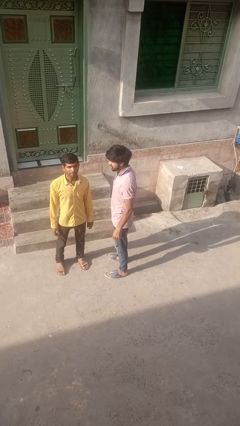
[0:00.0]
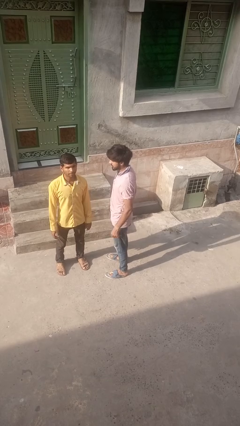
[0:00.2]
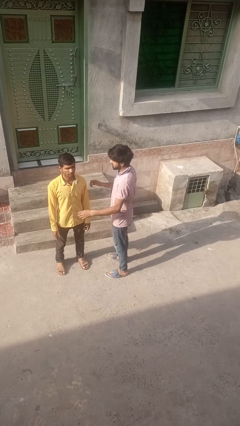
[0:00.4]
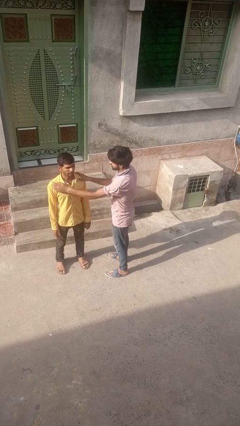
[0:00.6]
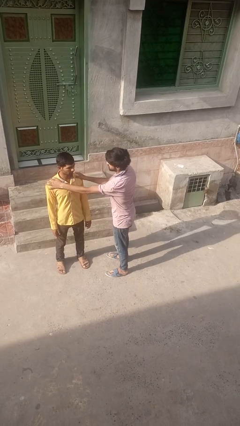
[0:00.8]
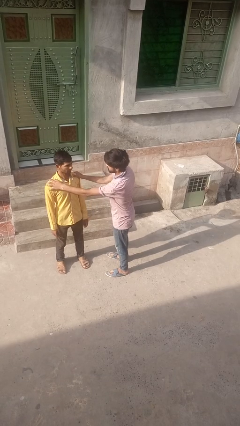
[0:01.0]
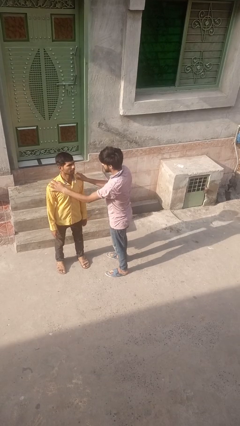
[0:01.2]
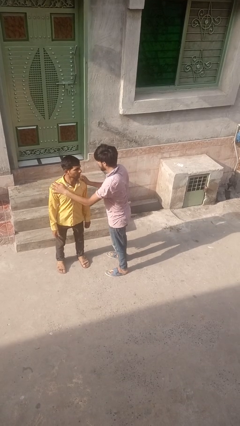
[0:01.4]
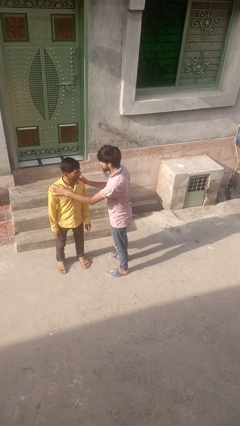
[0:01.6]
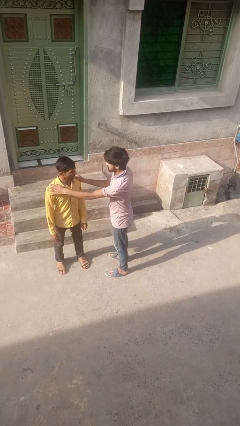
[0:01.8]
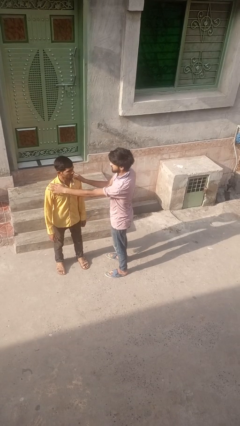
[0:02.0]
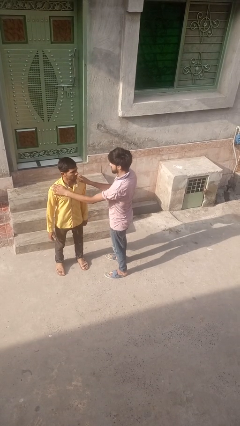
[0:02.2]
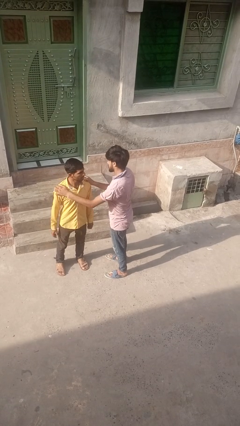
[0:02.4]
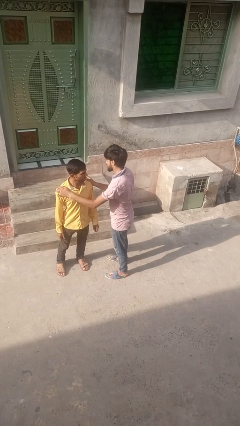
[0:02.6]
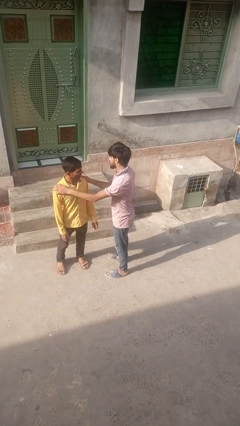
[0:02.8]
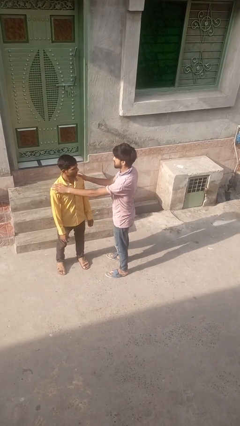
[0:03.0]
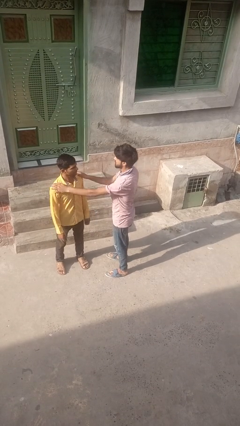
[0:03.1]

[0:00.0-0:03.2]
person grabs person by shoulder

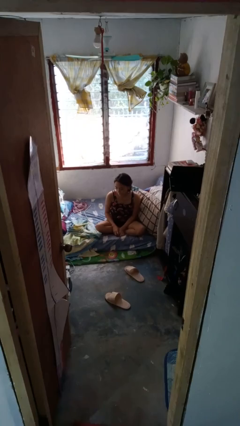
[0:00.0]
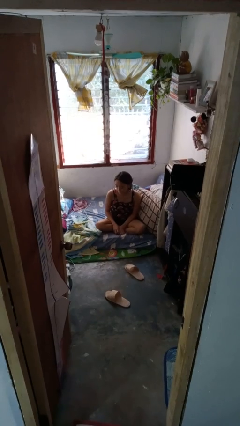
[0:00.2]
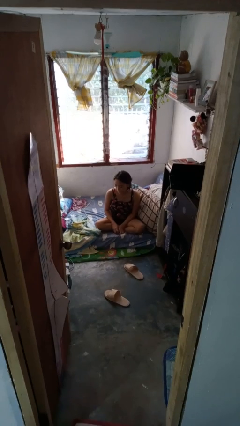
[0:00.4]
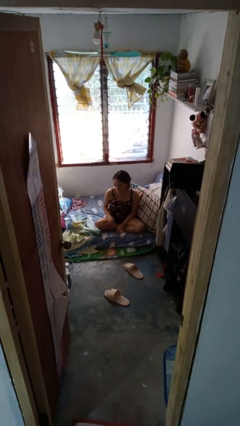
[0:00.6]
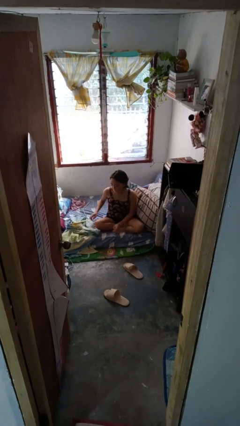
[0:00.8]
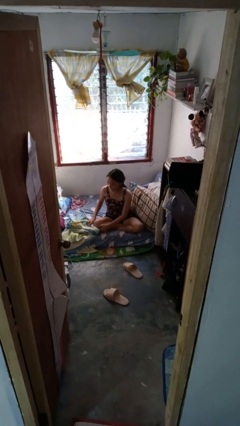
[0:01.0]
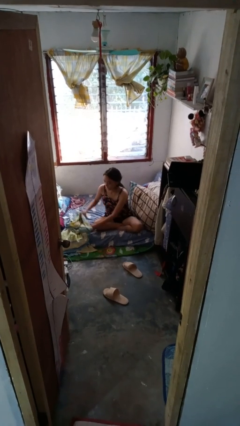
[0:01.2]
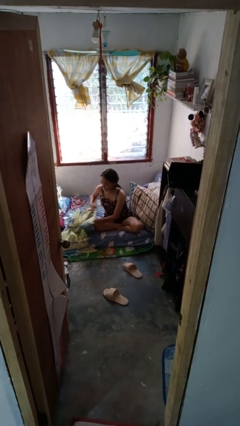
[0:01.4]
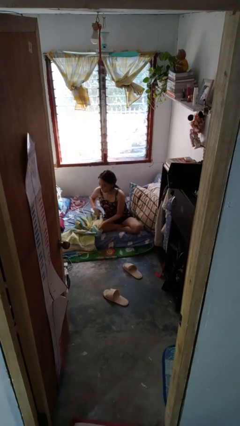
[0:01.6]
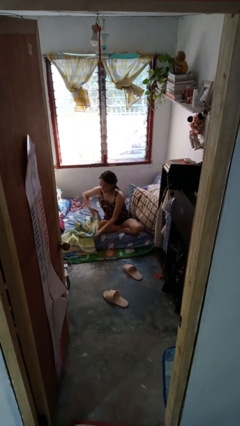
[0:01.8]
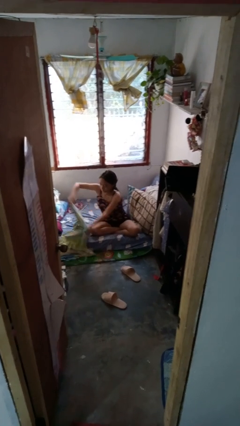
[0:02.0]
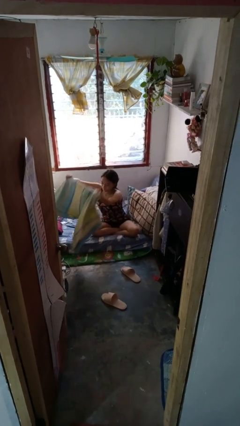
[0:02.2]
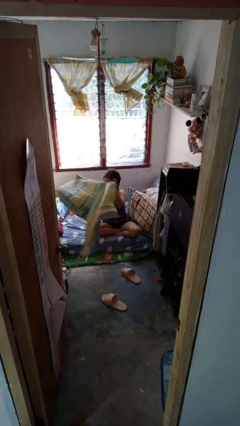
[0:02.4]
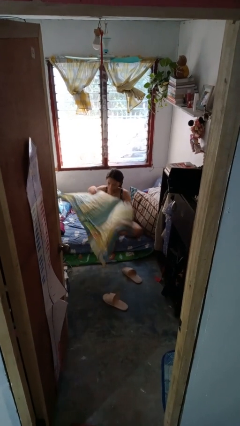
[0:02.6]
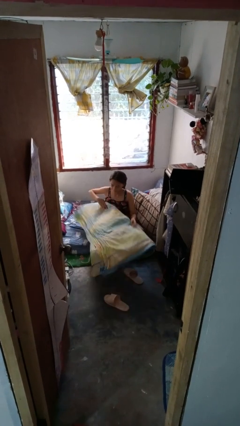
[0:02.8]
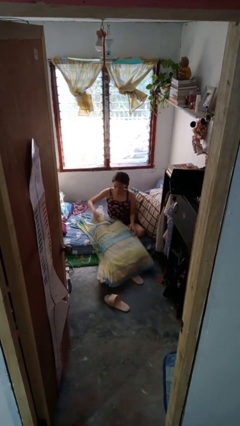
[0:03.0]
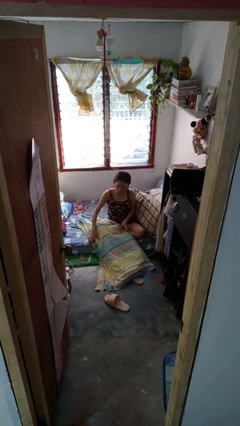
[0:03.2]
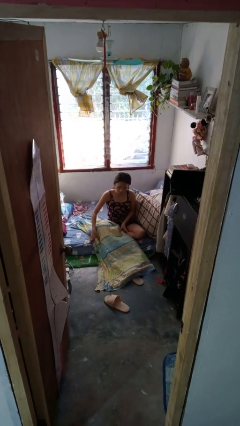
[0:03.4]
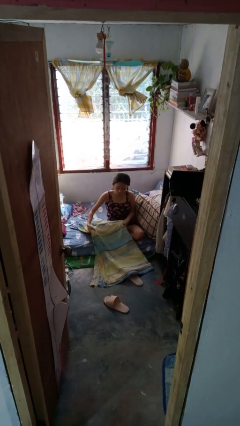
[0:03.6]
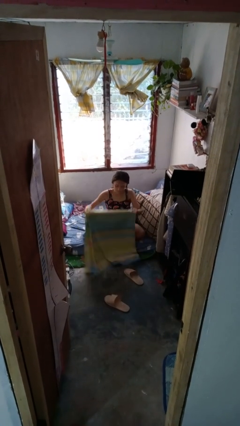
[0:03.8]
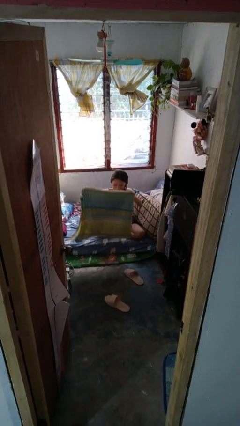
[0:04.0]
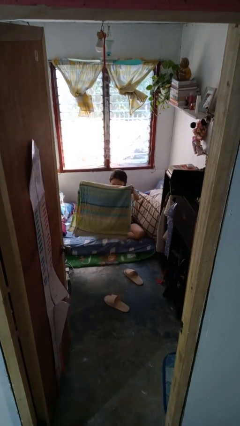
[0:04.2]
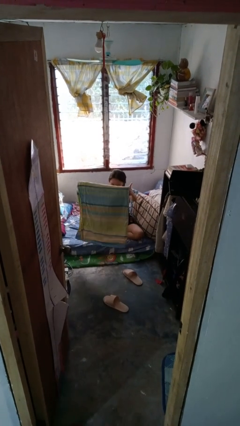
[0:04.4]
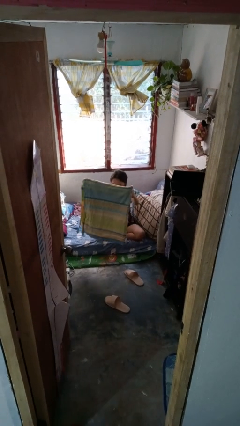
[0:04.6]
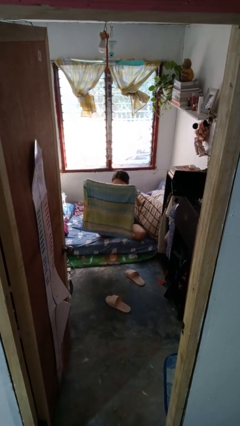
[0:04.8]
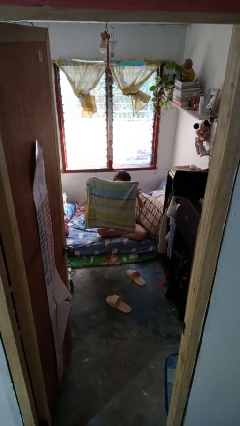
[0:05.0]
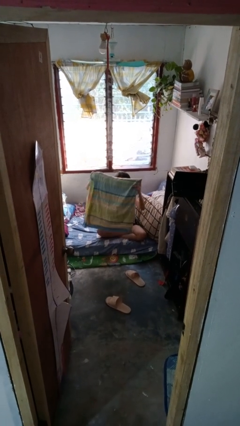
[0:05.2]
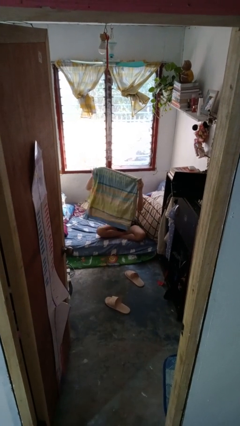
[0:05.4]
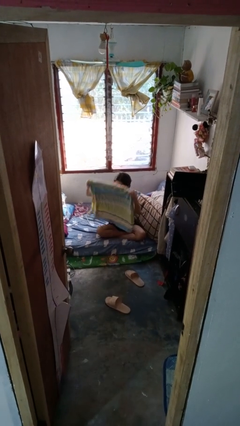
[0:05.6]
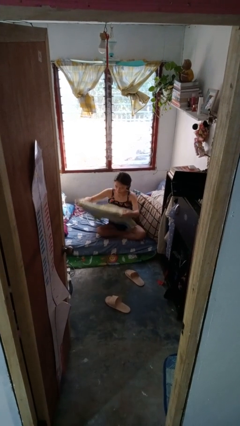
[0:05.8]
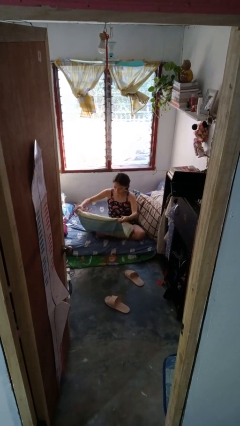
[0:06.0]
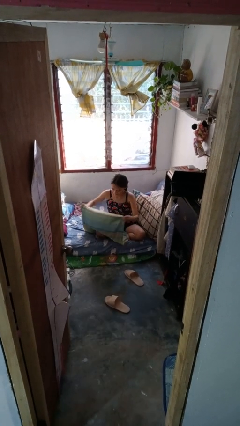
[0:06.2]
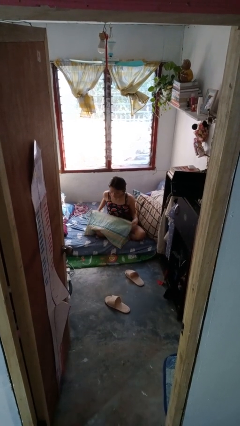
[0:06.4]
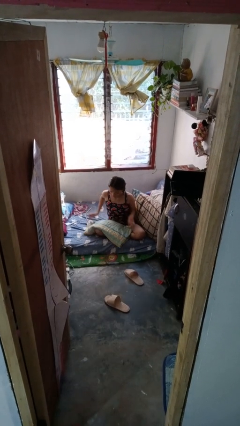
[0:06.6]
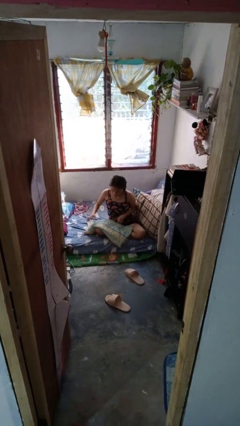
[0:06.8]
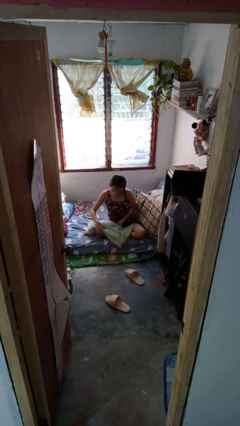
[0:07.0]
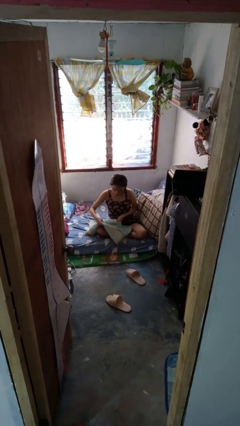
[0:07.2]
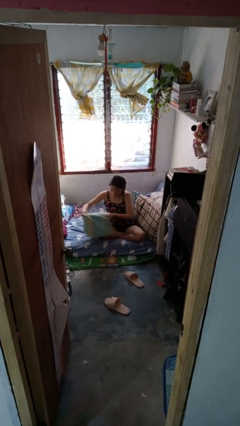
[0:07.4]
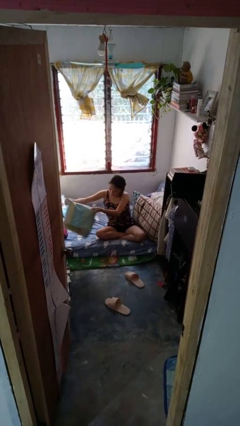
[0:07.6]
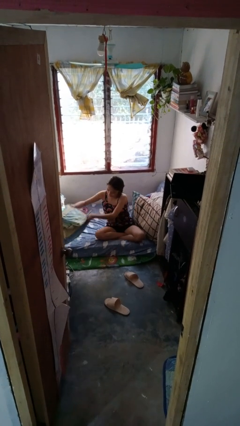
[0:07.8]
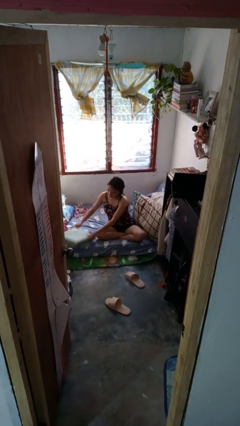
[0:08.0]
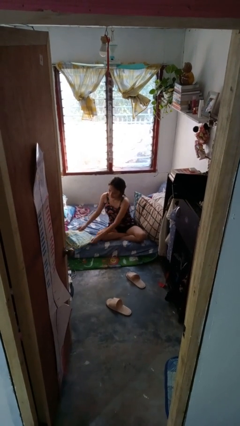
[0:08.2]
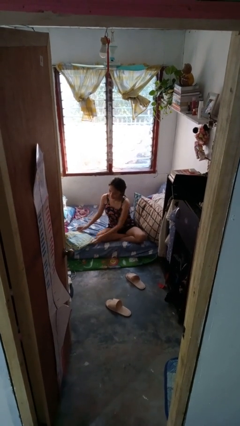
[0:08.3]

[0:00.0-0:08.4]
person folds blanket

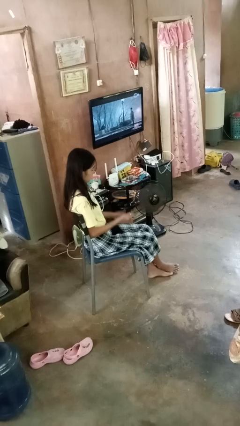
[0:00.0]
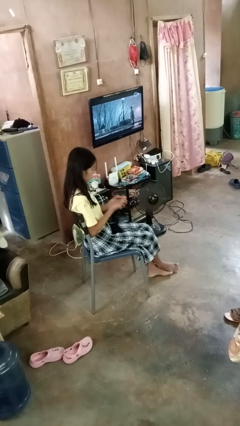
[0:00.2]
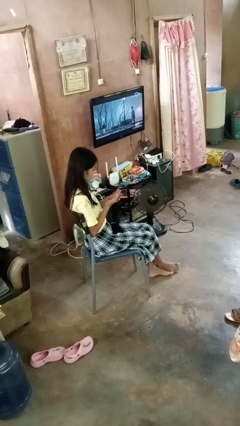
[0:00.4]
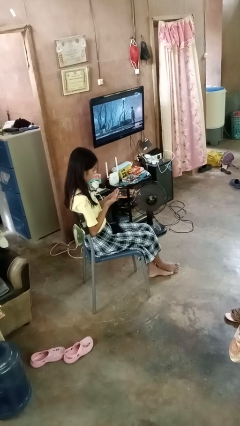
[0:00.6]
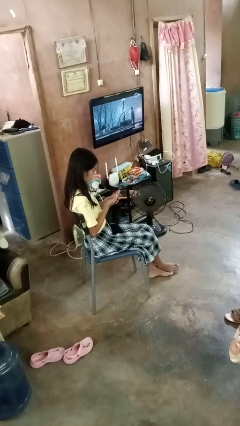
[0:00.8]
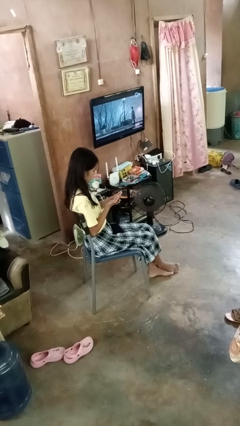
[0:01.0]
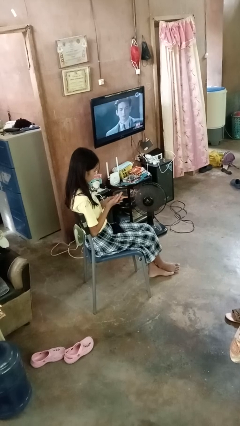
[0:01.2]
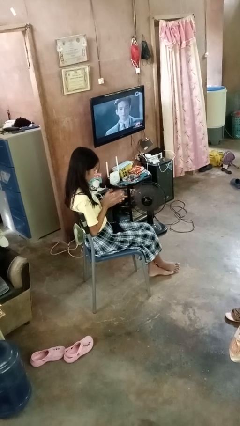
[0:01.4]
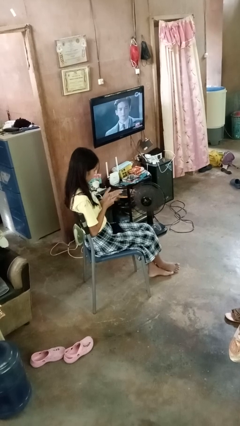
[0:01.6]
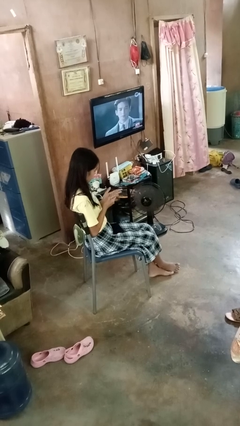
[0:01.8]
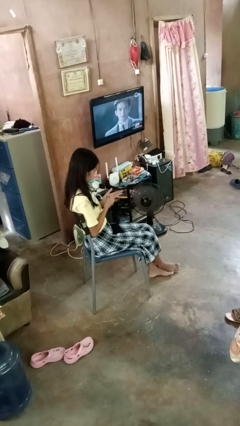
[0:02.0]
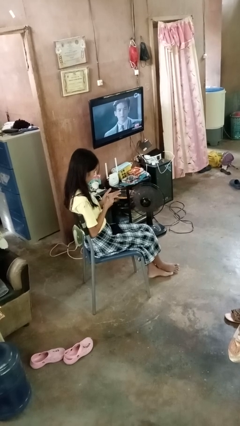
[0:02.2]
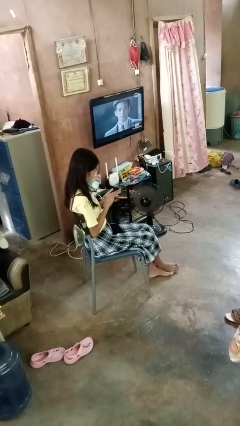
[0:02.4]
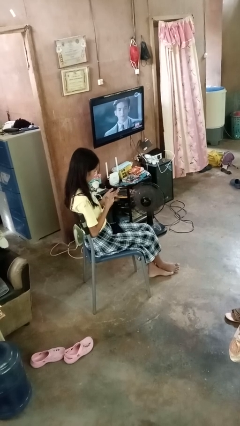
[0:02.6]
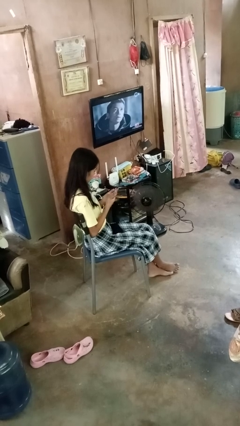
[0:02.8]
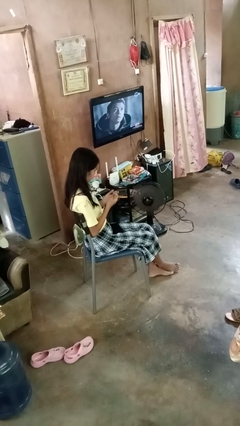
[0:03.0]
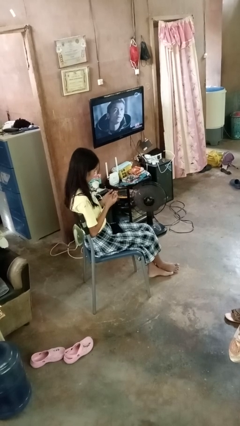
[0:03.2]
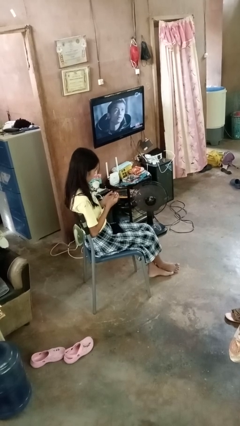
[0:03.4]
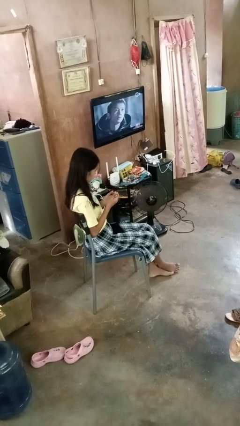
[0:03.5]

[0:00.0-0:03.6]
person looks at hands in lap

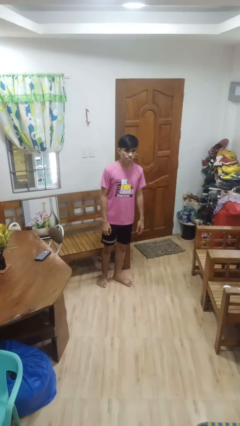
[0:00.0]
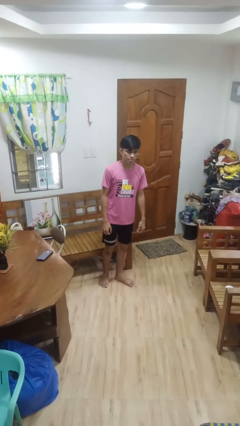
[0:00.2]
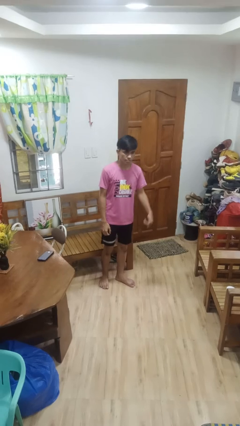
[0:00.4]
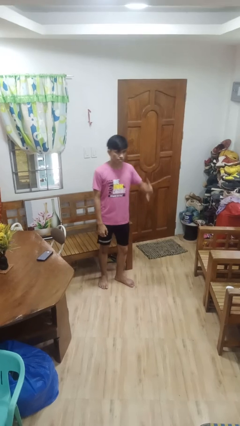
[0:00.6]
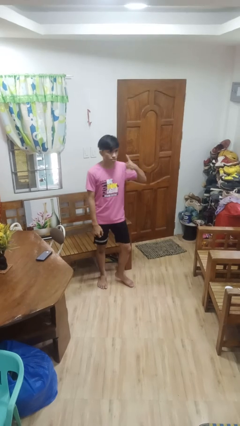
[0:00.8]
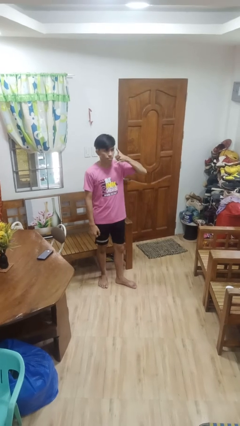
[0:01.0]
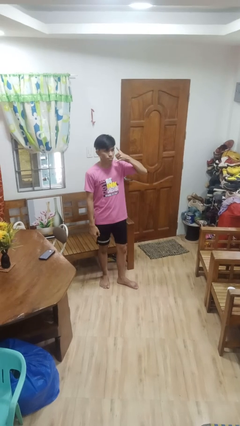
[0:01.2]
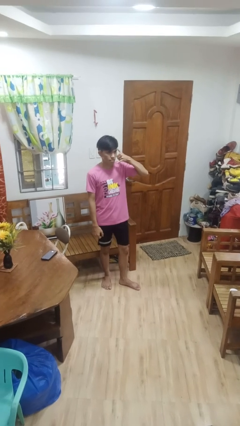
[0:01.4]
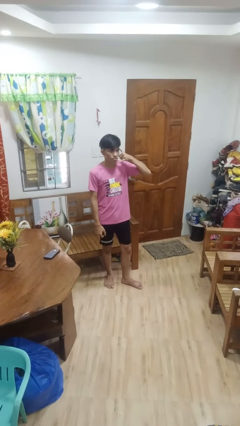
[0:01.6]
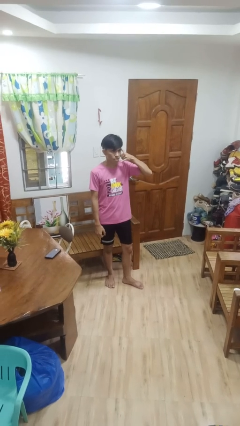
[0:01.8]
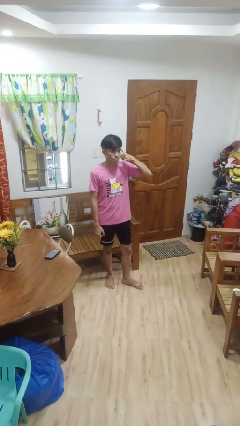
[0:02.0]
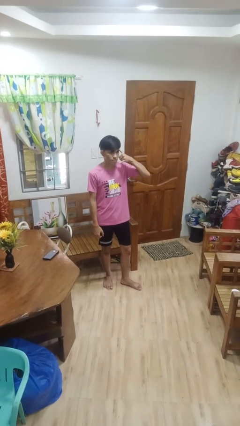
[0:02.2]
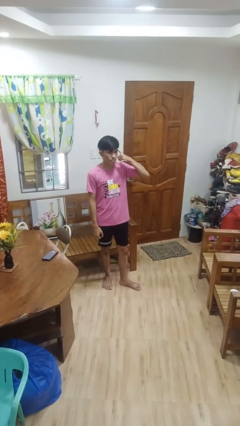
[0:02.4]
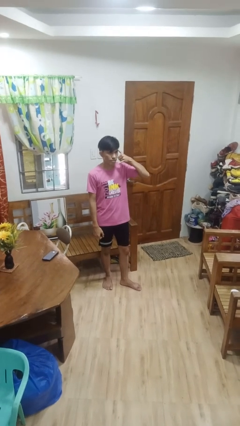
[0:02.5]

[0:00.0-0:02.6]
person gestures call me
